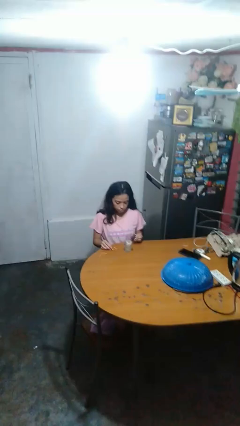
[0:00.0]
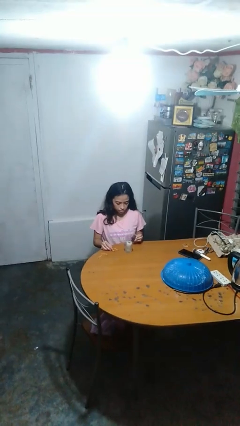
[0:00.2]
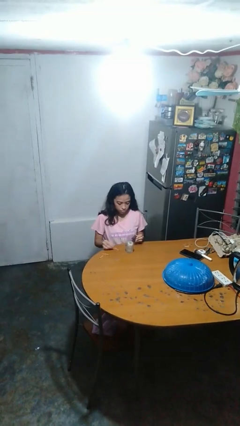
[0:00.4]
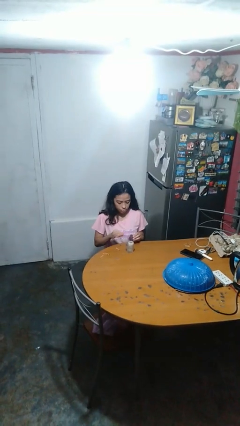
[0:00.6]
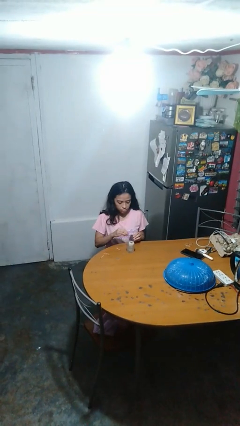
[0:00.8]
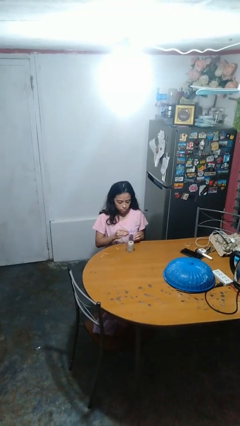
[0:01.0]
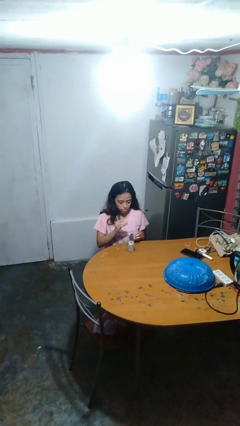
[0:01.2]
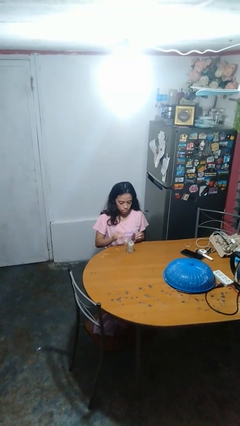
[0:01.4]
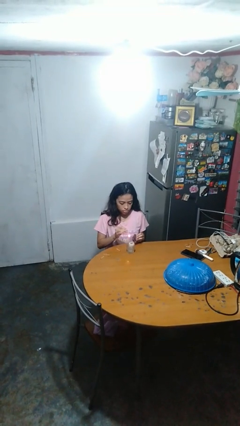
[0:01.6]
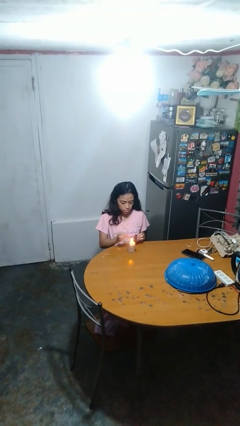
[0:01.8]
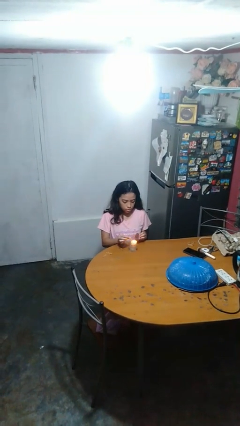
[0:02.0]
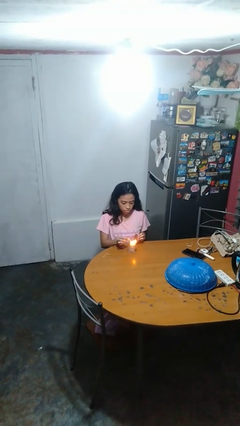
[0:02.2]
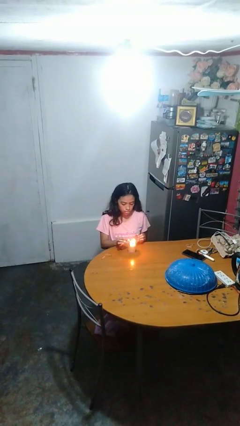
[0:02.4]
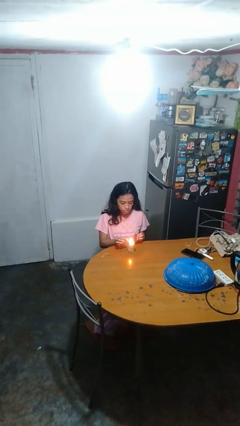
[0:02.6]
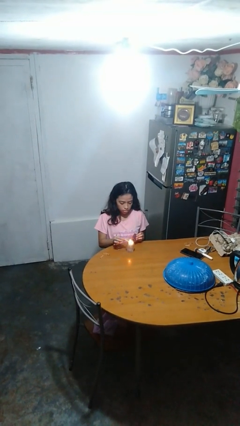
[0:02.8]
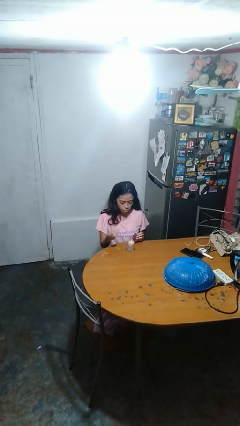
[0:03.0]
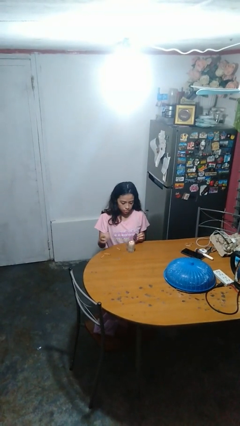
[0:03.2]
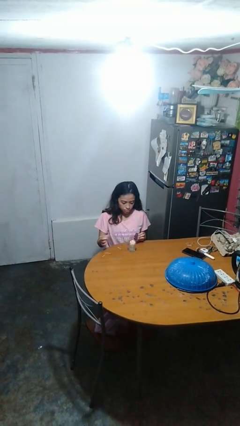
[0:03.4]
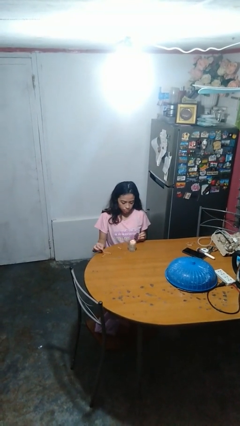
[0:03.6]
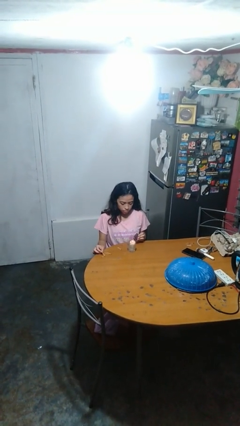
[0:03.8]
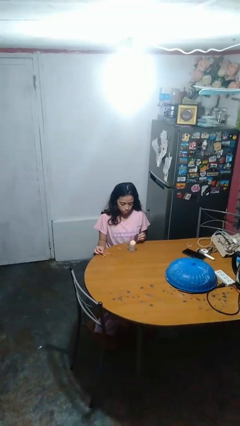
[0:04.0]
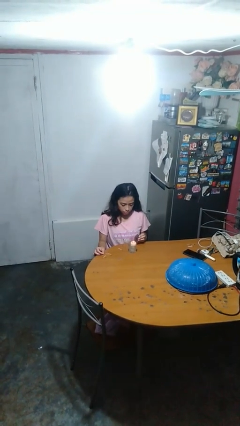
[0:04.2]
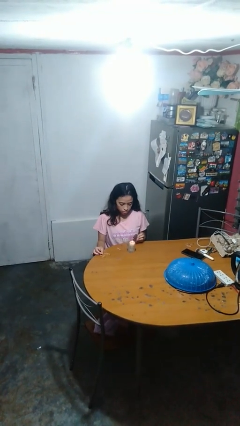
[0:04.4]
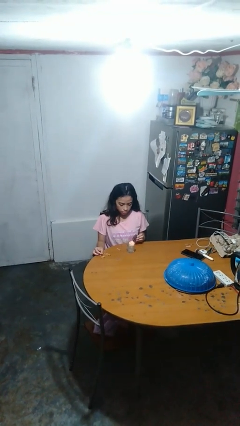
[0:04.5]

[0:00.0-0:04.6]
person lights candle

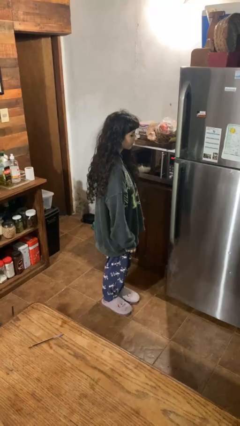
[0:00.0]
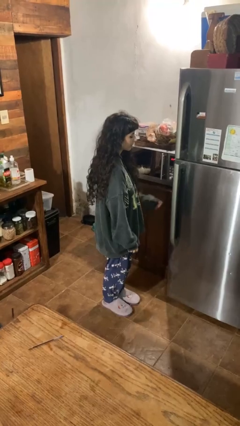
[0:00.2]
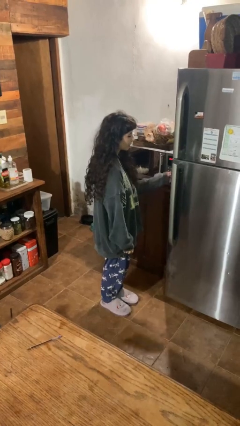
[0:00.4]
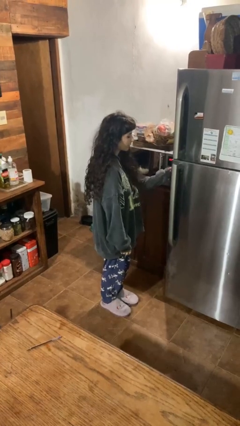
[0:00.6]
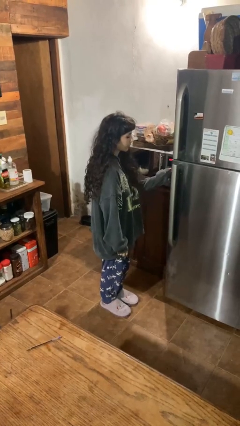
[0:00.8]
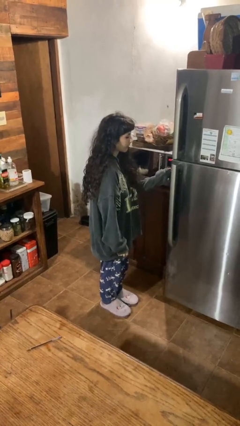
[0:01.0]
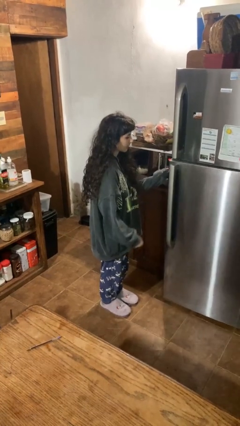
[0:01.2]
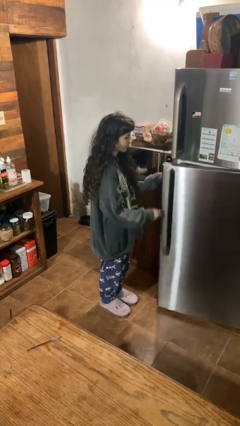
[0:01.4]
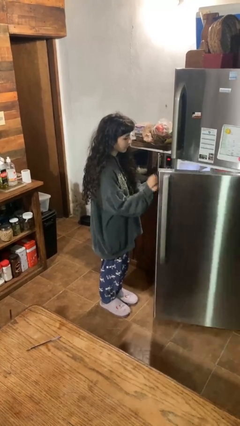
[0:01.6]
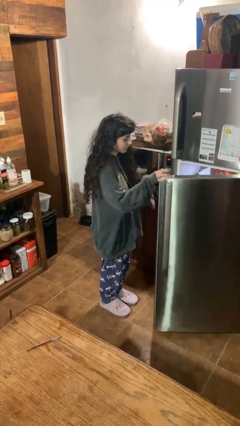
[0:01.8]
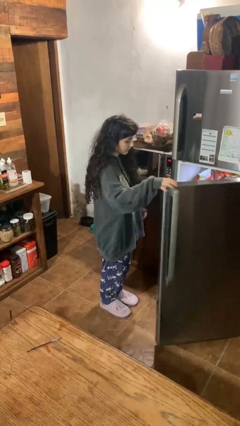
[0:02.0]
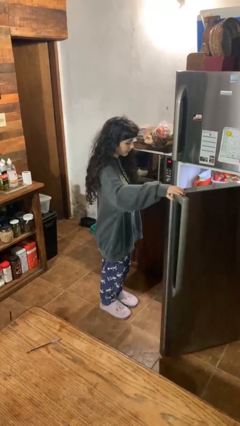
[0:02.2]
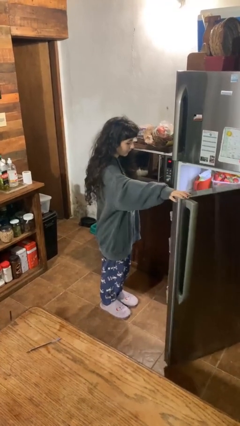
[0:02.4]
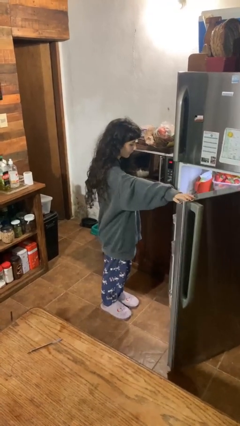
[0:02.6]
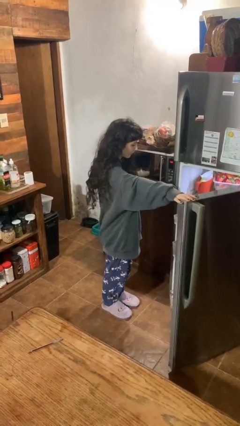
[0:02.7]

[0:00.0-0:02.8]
person opens refrigerator

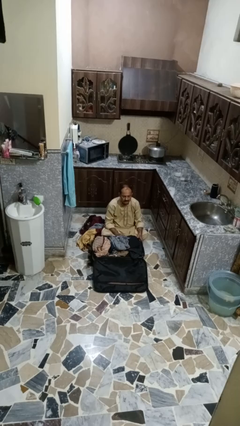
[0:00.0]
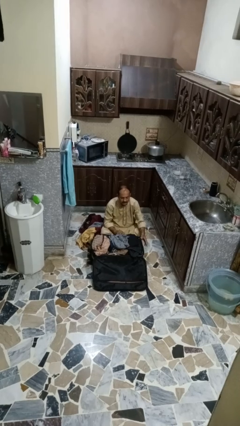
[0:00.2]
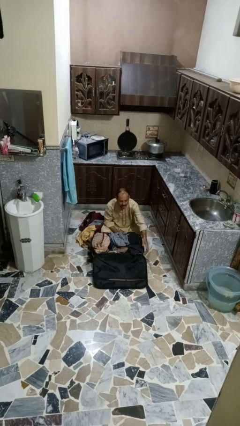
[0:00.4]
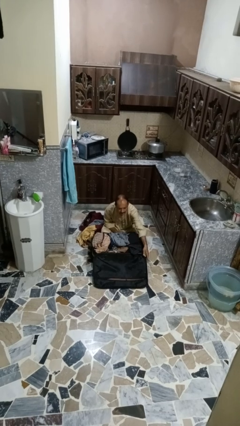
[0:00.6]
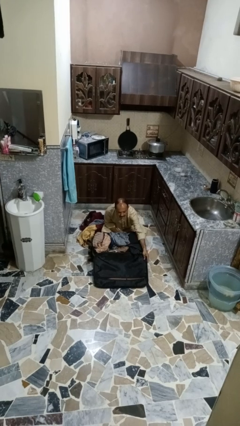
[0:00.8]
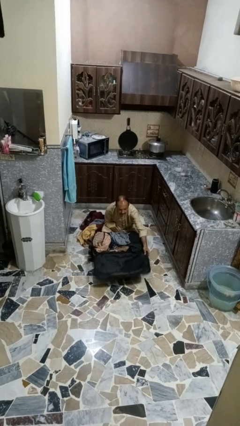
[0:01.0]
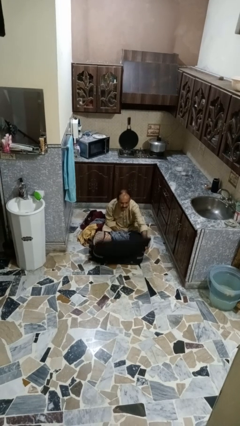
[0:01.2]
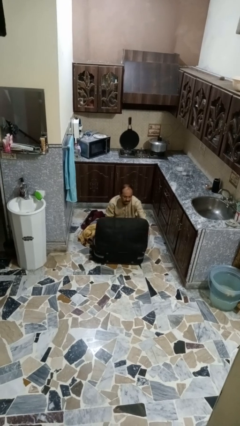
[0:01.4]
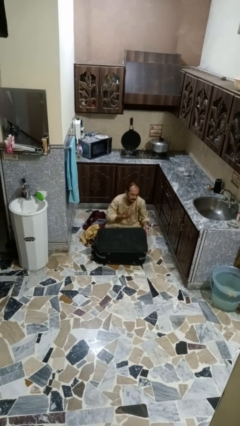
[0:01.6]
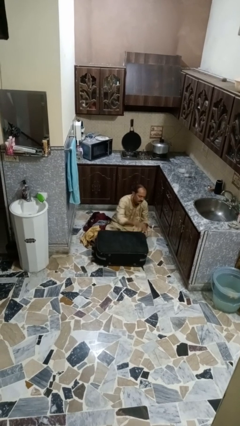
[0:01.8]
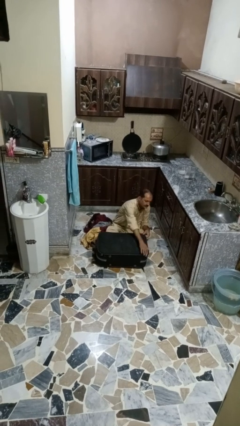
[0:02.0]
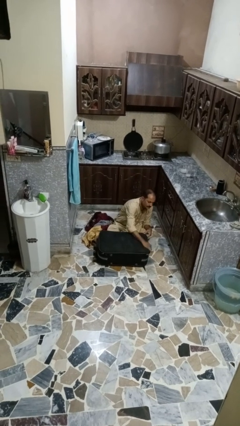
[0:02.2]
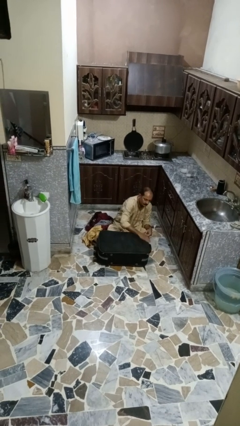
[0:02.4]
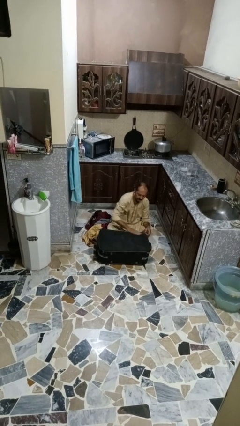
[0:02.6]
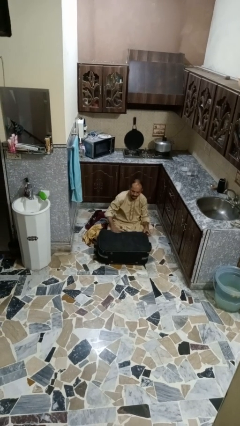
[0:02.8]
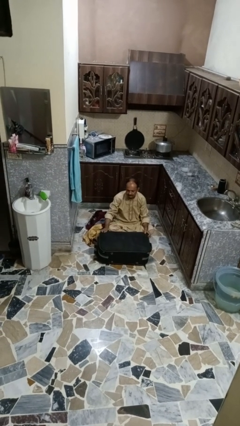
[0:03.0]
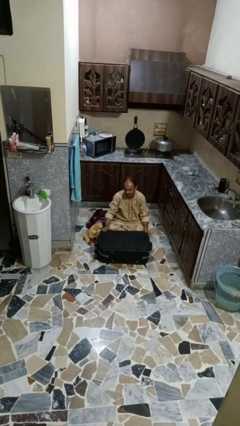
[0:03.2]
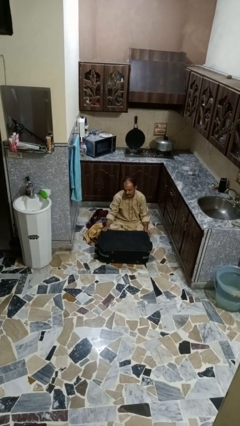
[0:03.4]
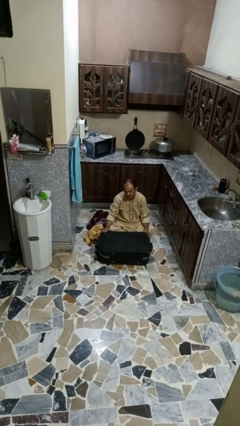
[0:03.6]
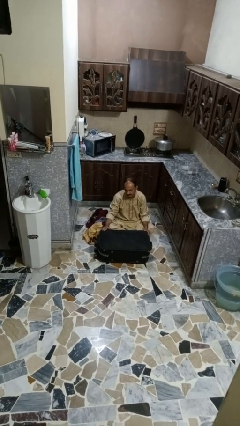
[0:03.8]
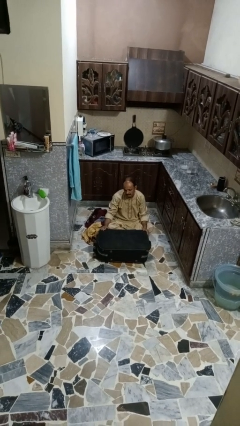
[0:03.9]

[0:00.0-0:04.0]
person closes suitcase

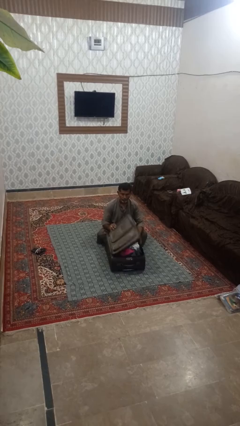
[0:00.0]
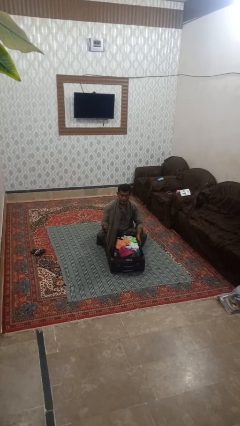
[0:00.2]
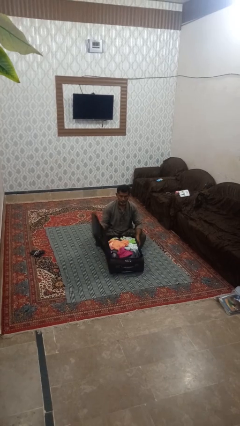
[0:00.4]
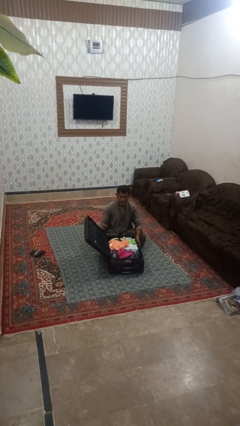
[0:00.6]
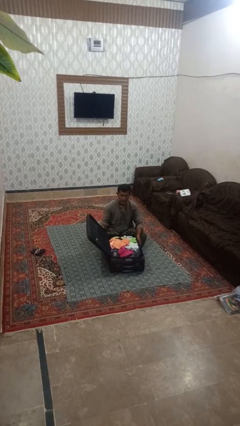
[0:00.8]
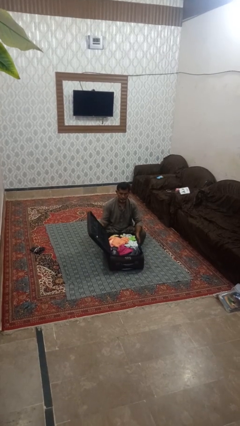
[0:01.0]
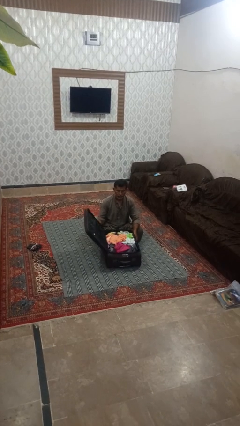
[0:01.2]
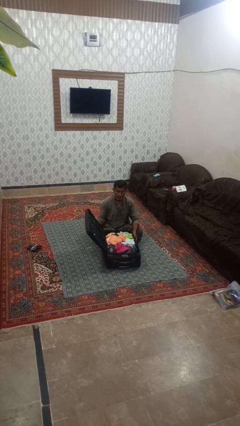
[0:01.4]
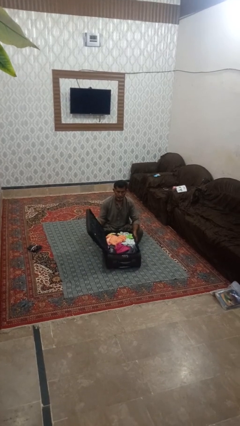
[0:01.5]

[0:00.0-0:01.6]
person opens suitcase

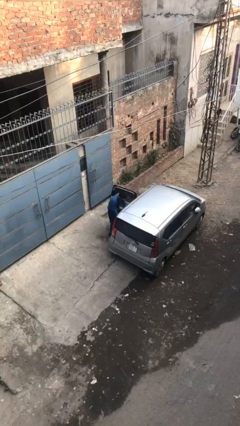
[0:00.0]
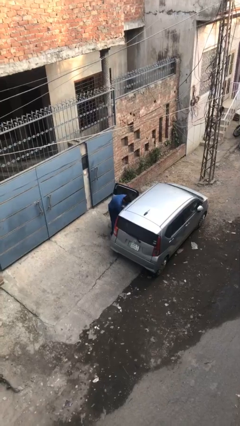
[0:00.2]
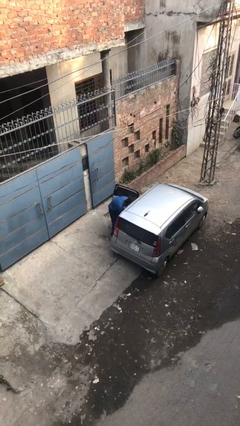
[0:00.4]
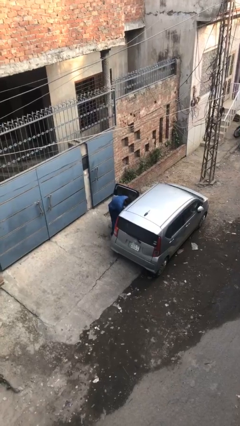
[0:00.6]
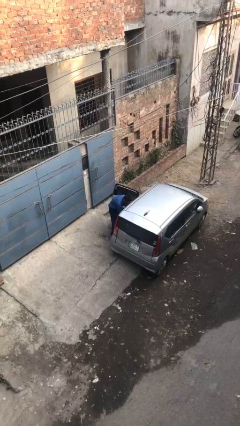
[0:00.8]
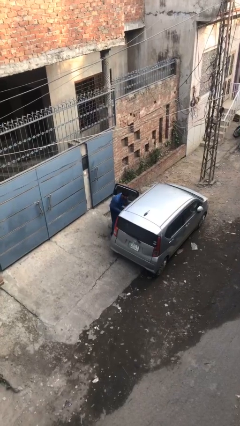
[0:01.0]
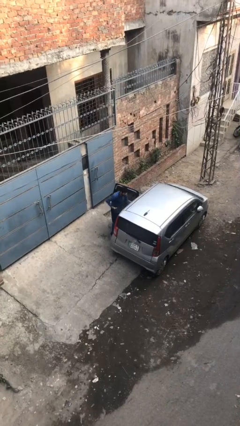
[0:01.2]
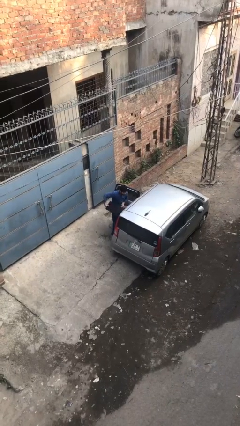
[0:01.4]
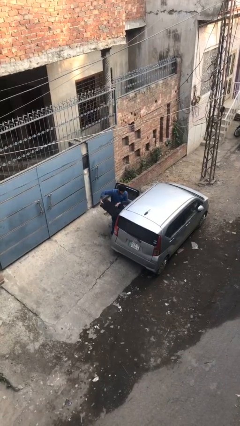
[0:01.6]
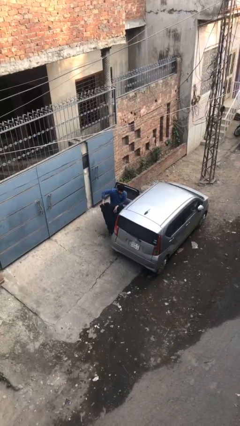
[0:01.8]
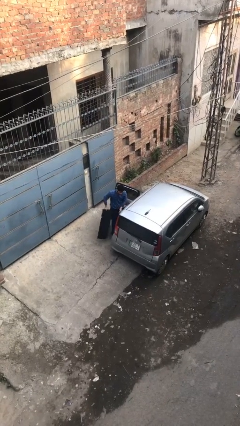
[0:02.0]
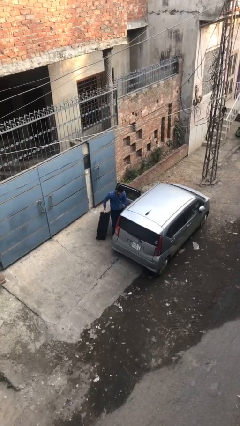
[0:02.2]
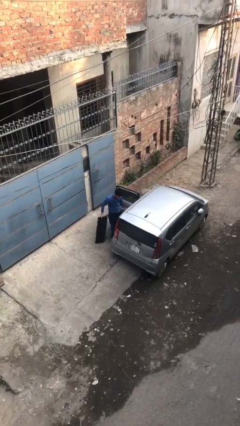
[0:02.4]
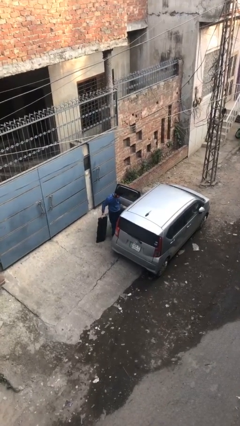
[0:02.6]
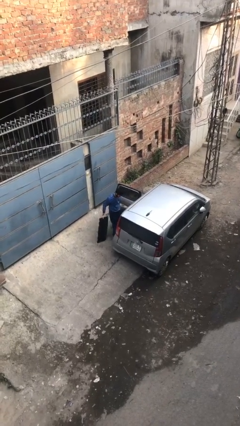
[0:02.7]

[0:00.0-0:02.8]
person unloads car

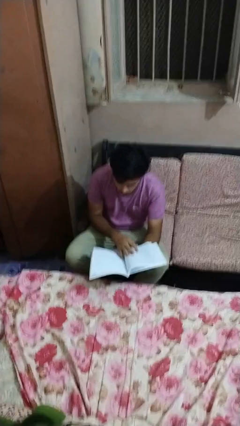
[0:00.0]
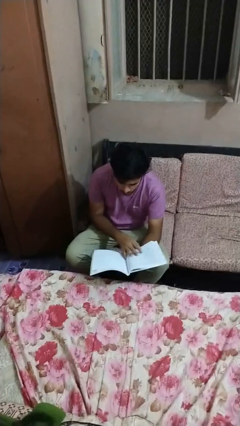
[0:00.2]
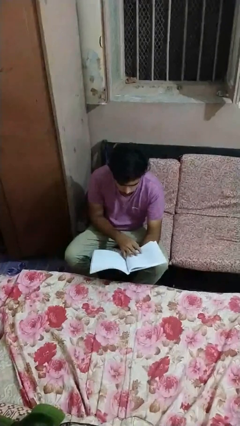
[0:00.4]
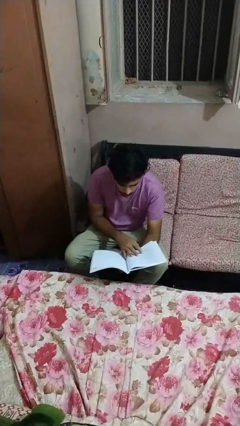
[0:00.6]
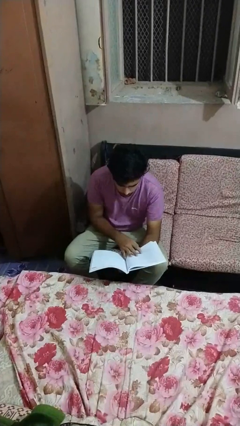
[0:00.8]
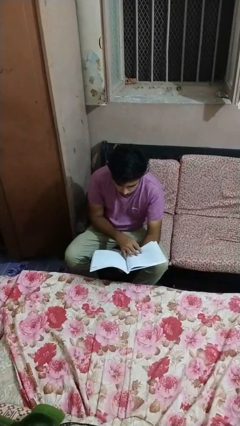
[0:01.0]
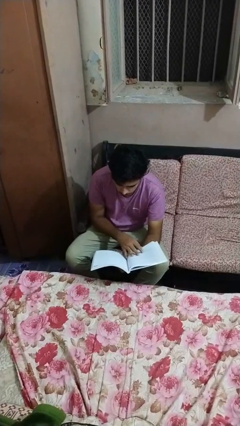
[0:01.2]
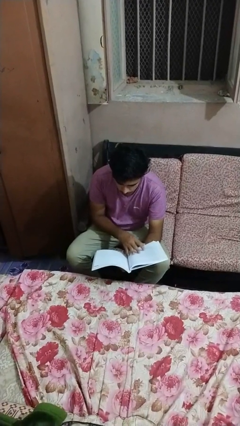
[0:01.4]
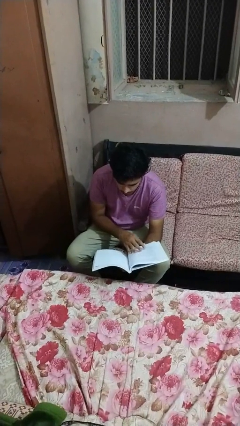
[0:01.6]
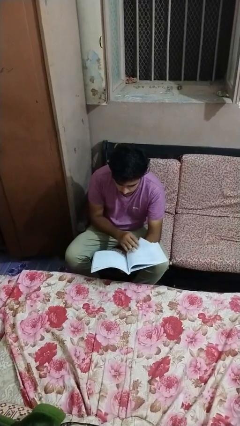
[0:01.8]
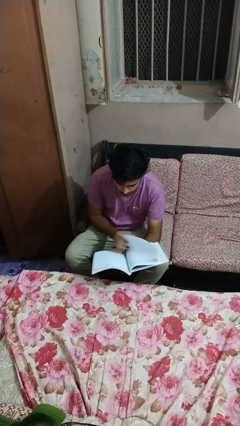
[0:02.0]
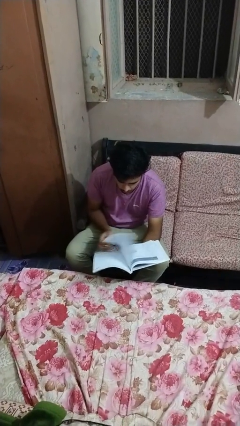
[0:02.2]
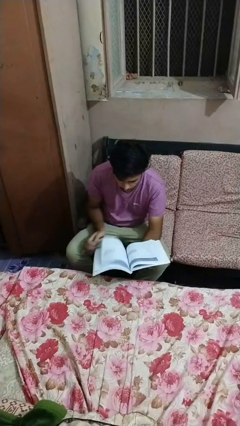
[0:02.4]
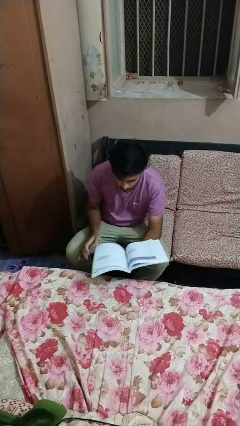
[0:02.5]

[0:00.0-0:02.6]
person reads newspaper
